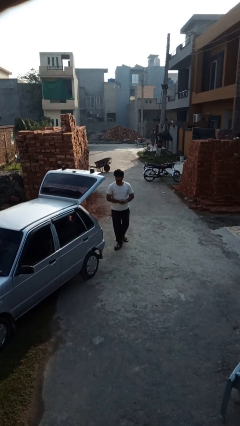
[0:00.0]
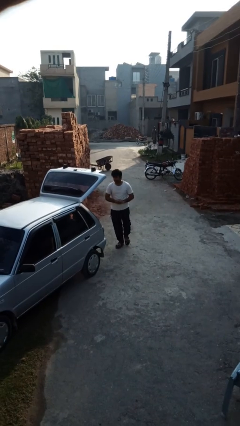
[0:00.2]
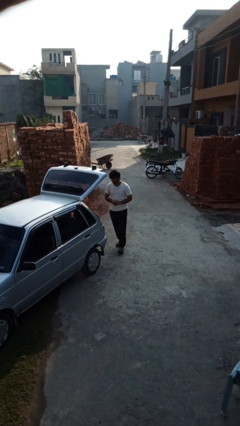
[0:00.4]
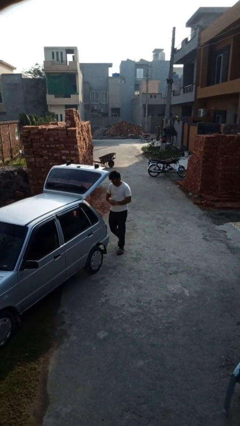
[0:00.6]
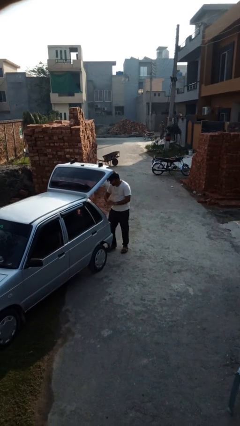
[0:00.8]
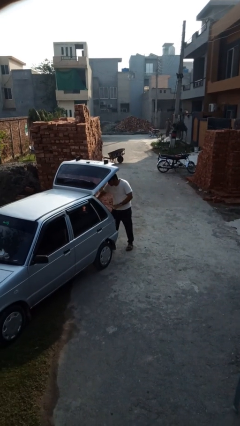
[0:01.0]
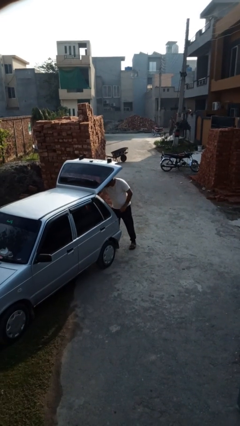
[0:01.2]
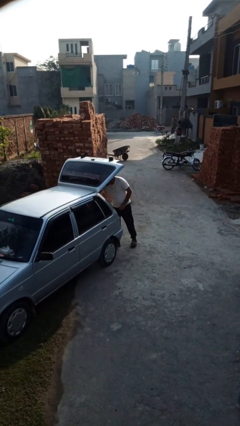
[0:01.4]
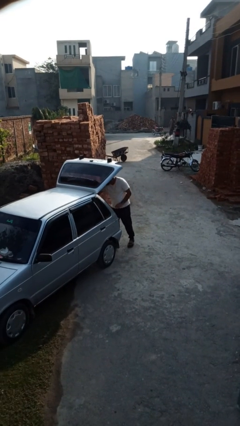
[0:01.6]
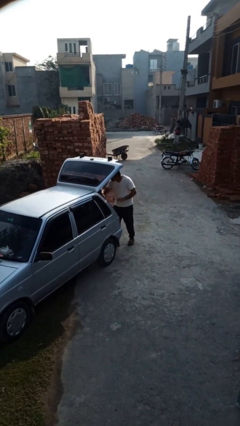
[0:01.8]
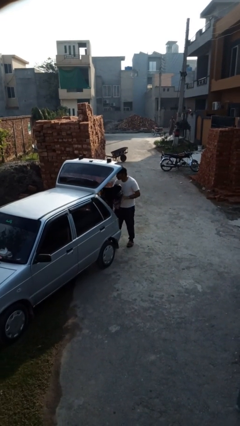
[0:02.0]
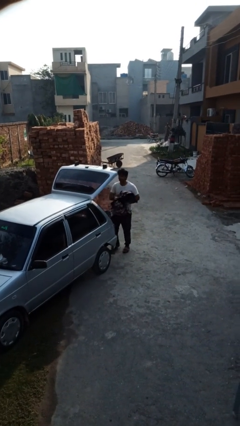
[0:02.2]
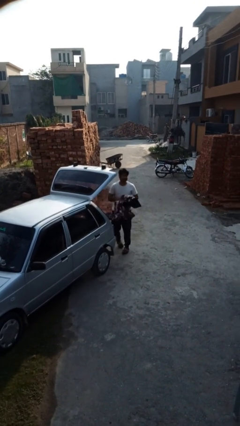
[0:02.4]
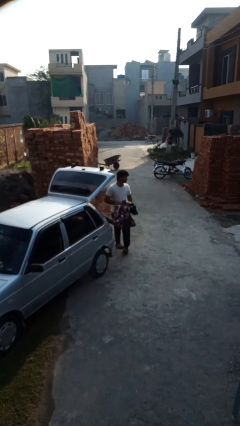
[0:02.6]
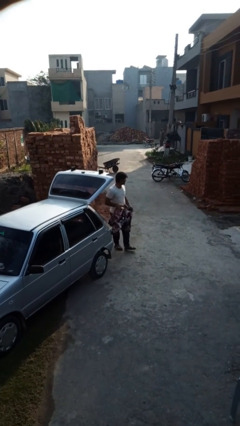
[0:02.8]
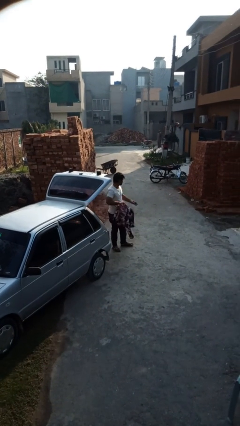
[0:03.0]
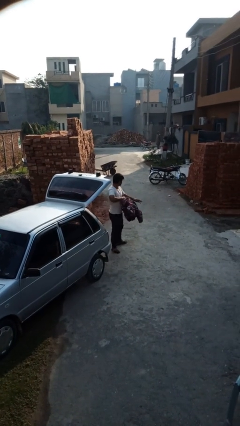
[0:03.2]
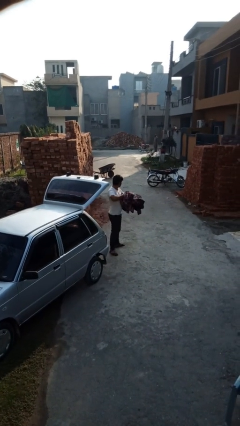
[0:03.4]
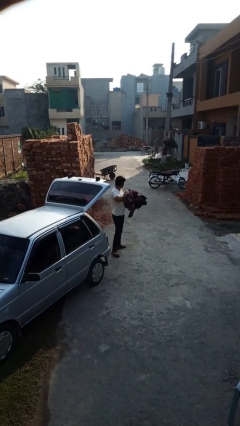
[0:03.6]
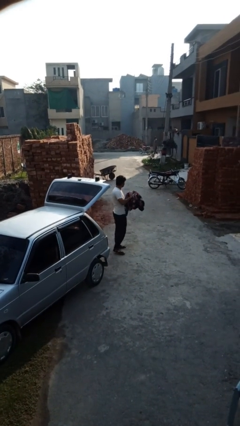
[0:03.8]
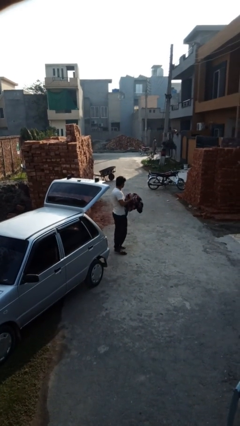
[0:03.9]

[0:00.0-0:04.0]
person unloads car

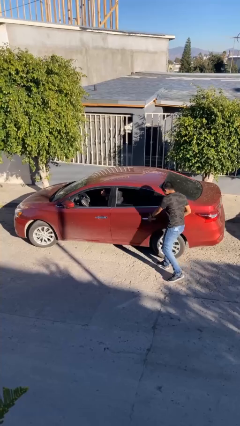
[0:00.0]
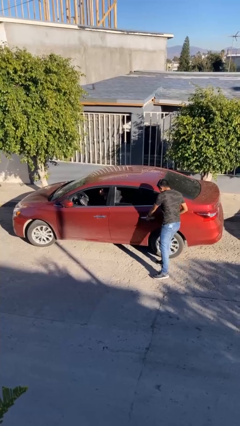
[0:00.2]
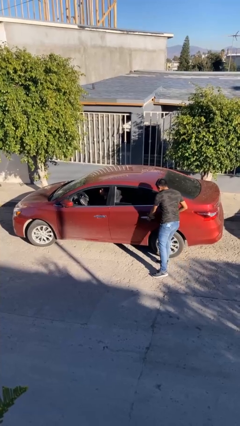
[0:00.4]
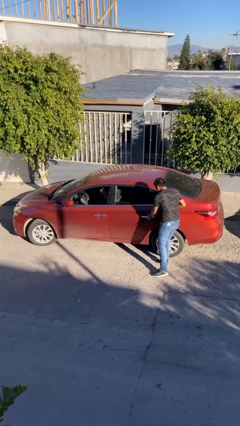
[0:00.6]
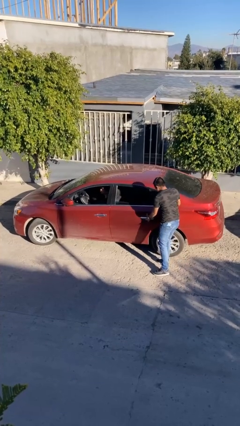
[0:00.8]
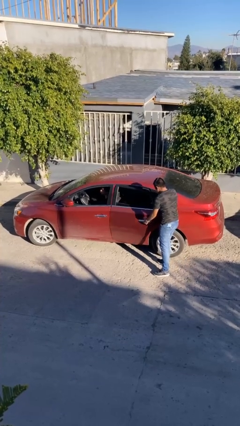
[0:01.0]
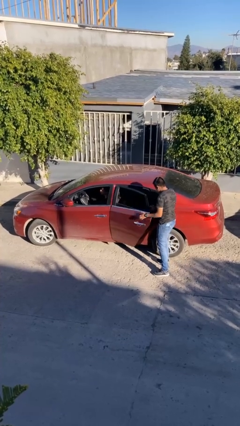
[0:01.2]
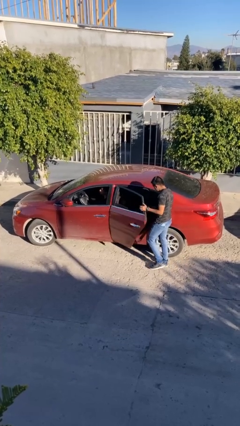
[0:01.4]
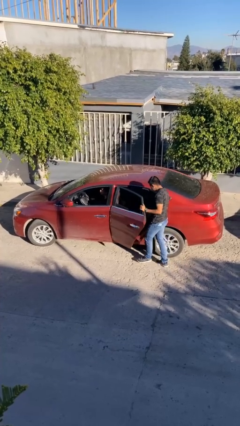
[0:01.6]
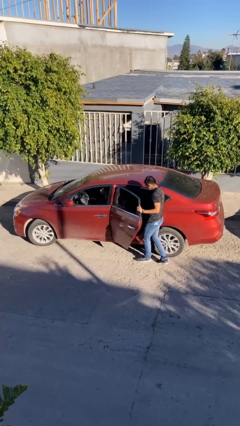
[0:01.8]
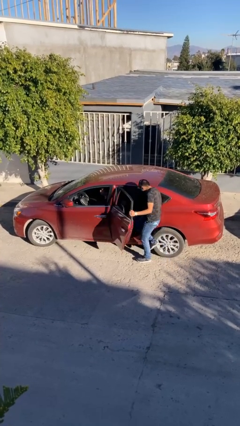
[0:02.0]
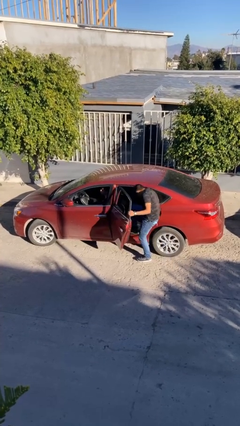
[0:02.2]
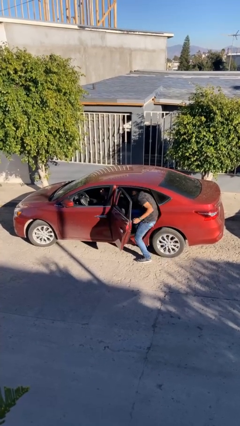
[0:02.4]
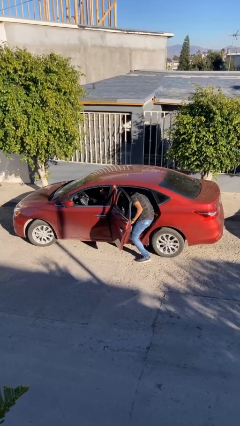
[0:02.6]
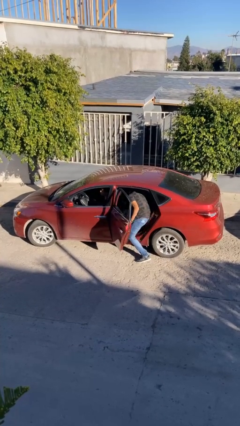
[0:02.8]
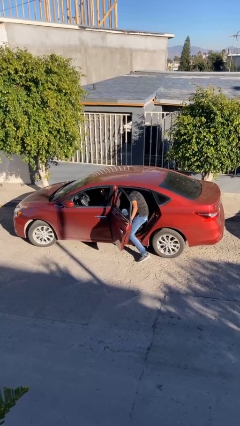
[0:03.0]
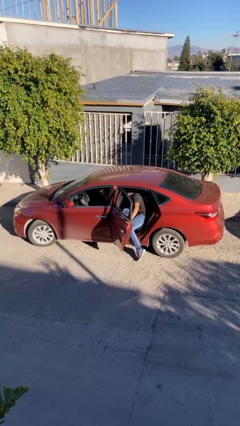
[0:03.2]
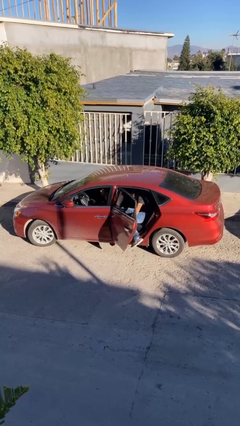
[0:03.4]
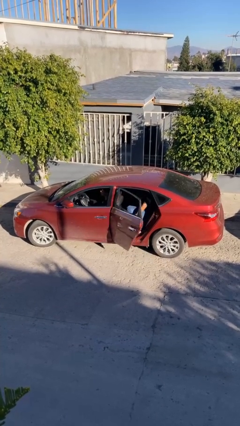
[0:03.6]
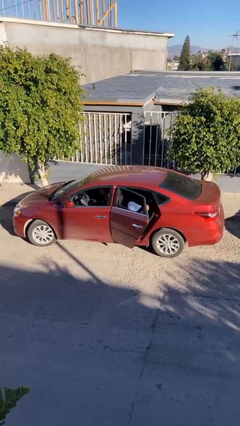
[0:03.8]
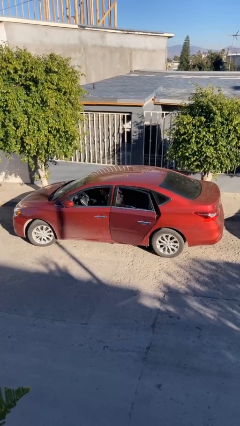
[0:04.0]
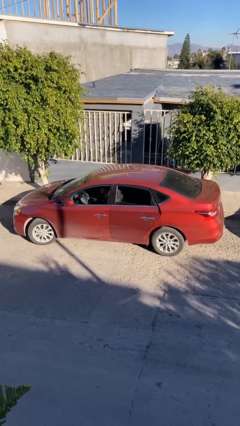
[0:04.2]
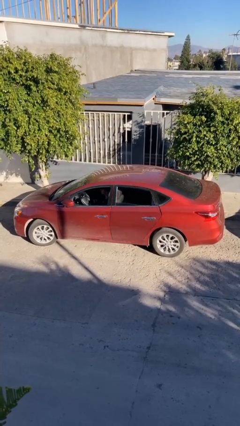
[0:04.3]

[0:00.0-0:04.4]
car picks up person

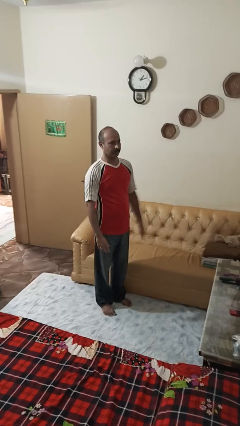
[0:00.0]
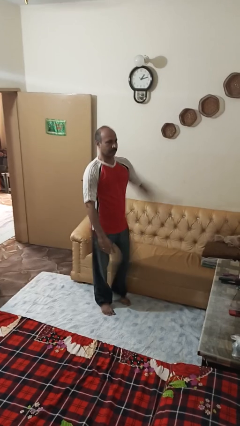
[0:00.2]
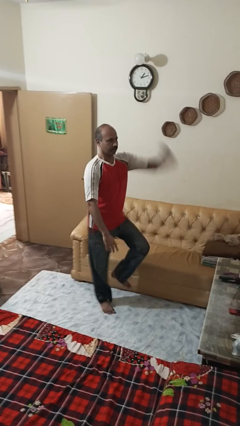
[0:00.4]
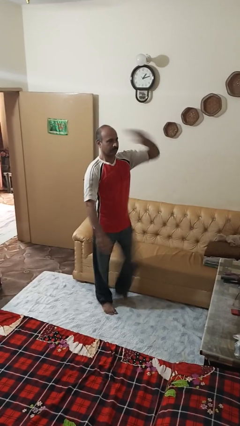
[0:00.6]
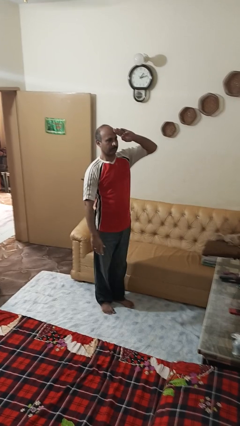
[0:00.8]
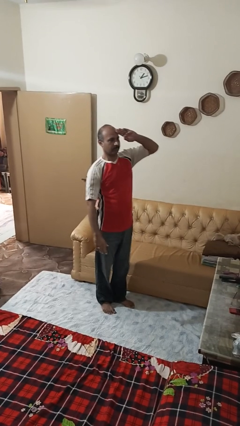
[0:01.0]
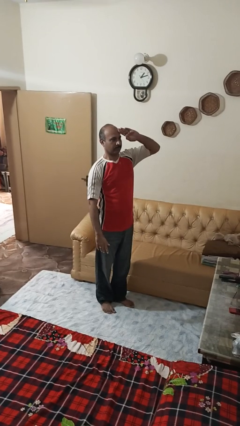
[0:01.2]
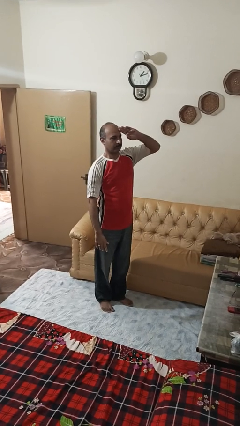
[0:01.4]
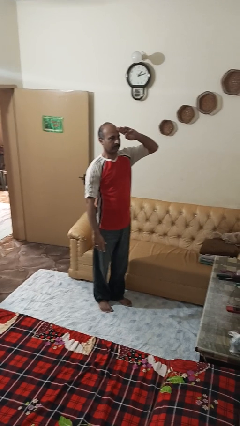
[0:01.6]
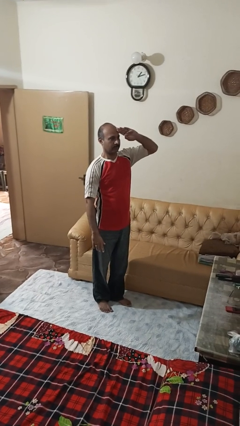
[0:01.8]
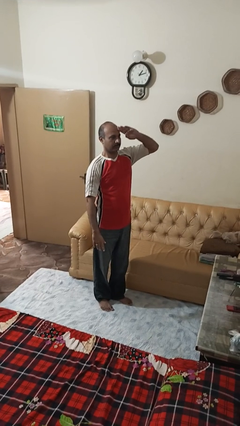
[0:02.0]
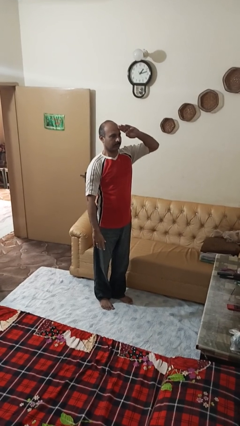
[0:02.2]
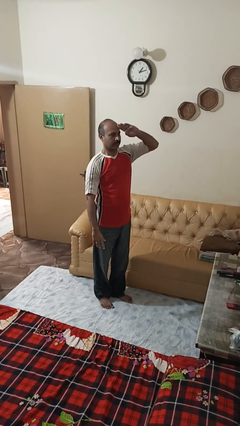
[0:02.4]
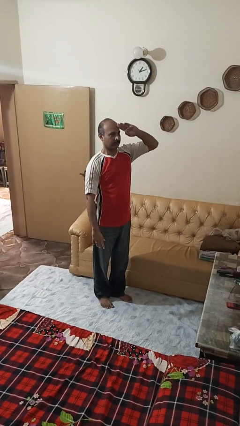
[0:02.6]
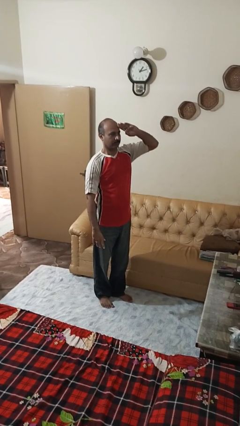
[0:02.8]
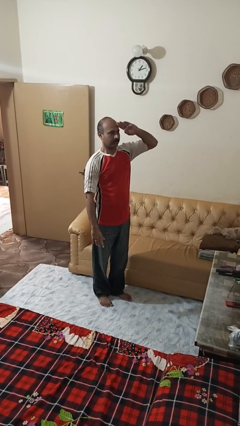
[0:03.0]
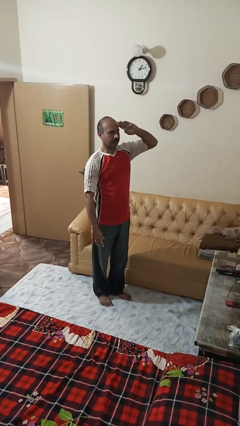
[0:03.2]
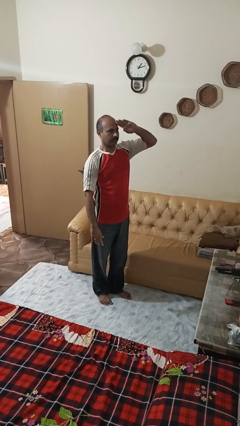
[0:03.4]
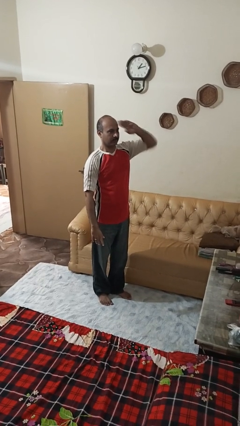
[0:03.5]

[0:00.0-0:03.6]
person salutes

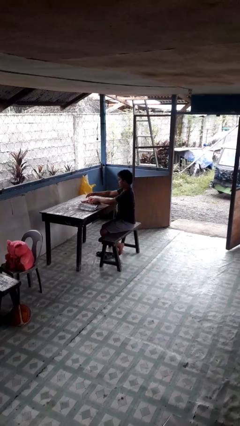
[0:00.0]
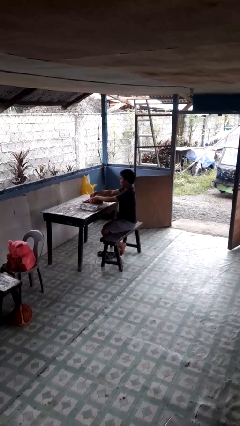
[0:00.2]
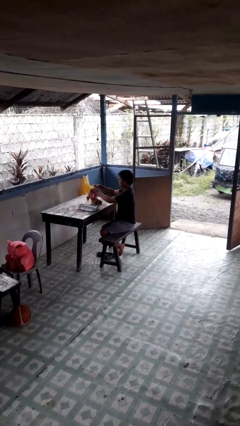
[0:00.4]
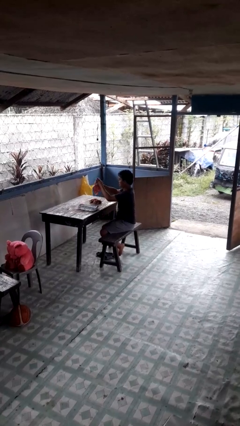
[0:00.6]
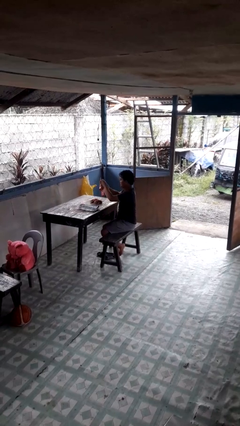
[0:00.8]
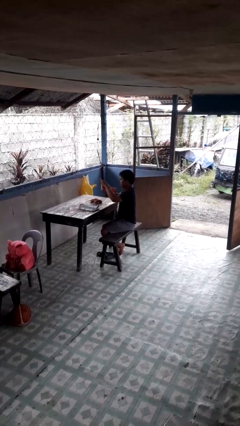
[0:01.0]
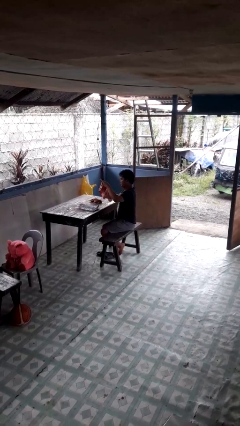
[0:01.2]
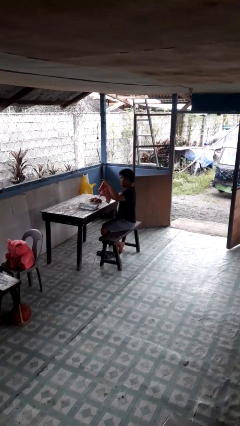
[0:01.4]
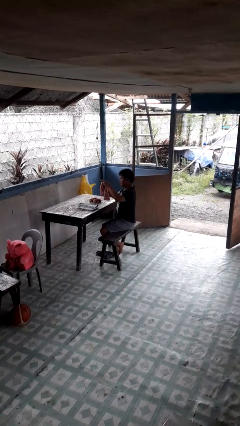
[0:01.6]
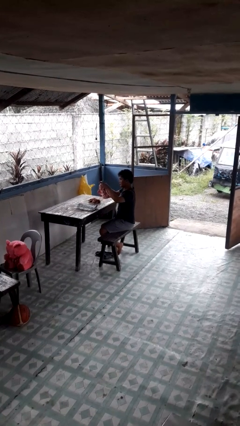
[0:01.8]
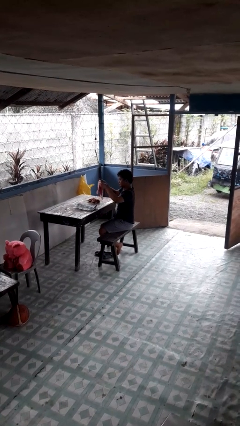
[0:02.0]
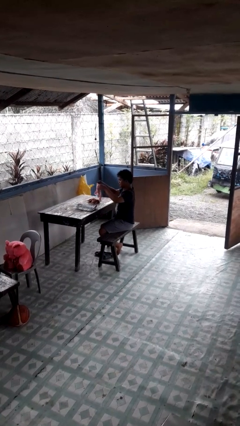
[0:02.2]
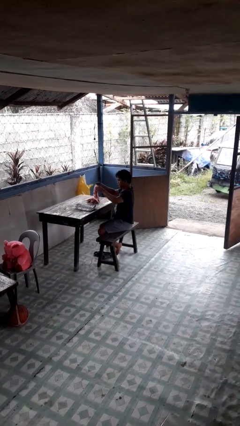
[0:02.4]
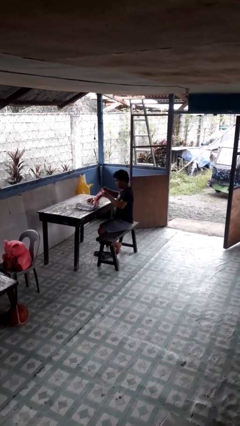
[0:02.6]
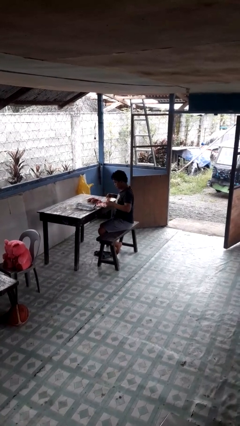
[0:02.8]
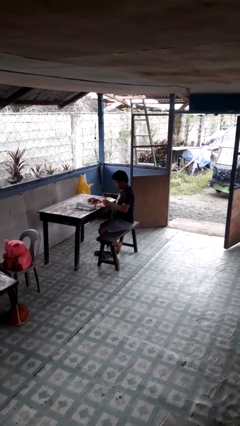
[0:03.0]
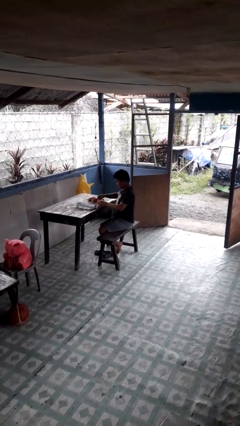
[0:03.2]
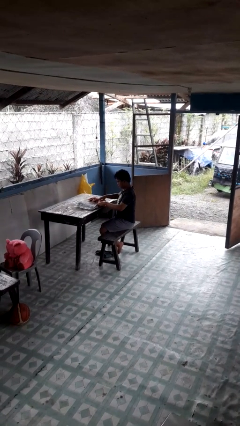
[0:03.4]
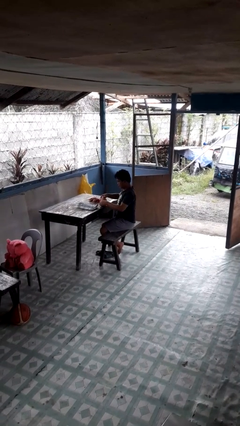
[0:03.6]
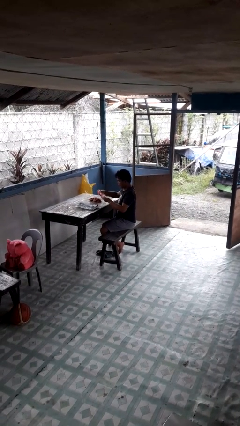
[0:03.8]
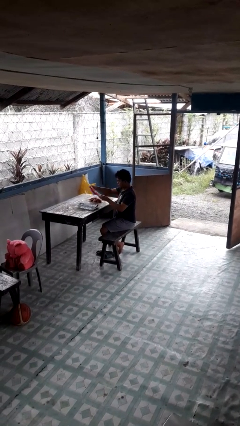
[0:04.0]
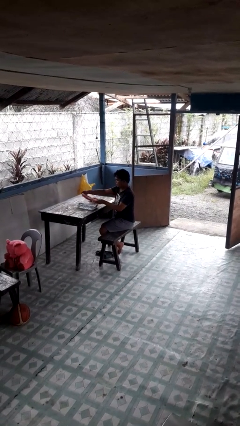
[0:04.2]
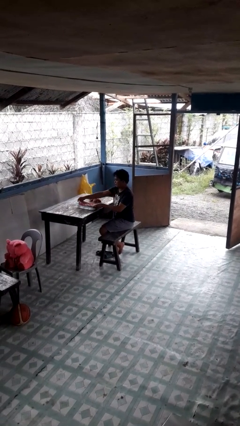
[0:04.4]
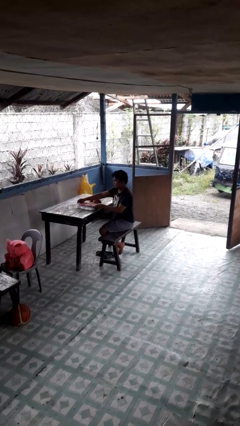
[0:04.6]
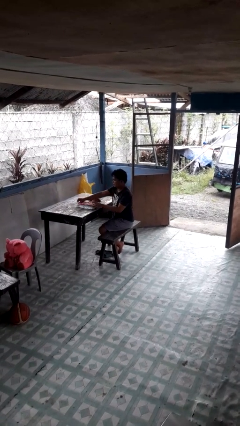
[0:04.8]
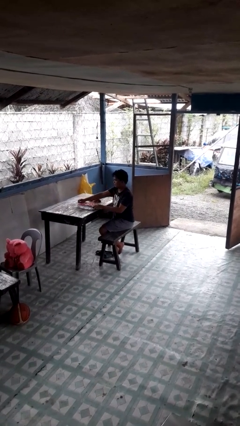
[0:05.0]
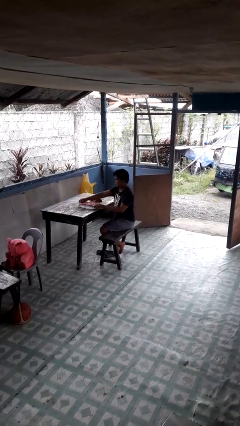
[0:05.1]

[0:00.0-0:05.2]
person folds towel

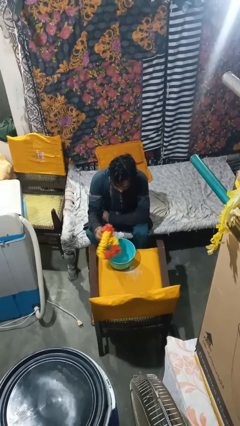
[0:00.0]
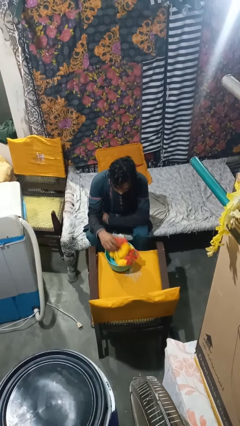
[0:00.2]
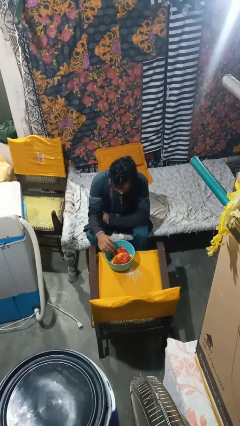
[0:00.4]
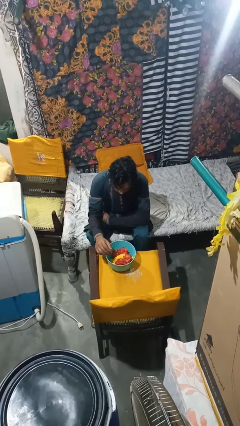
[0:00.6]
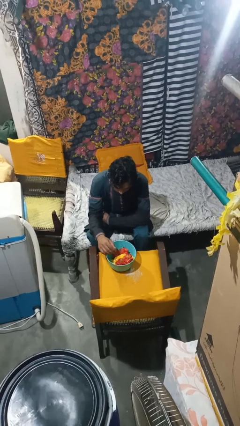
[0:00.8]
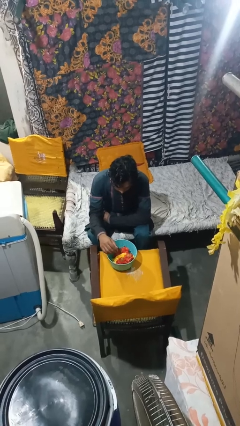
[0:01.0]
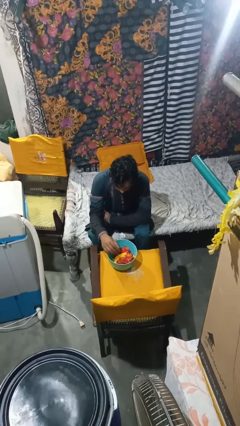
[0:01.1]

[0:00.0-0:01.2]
person pours into bowl
